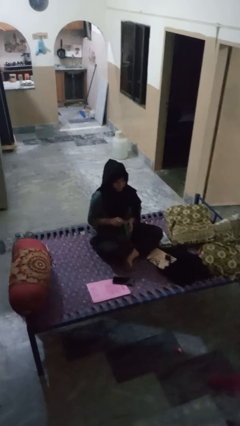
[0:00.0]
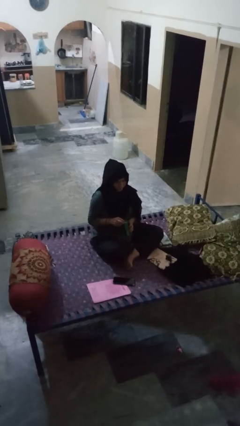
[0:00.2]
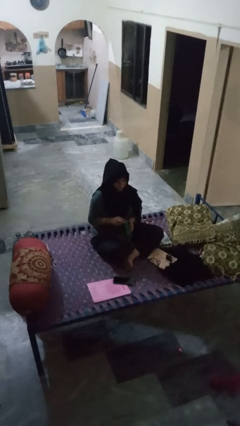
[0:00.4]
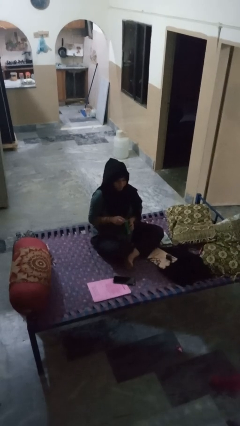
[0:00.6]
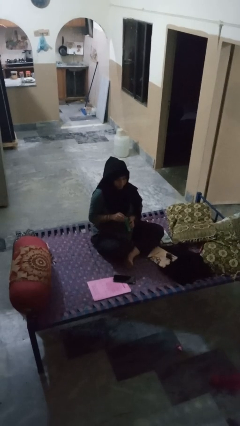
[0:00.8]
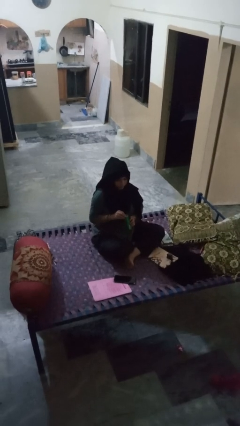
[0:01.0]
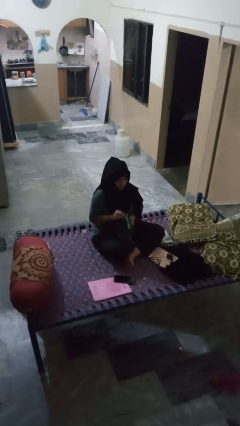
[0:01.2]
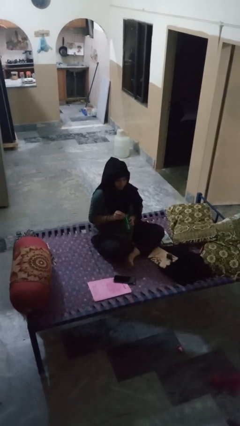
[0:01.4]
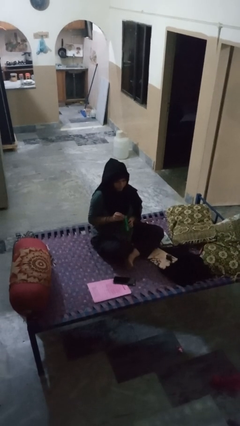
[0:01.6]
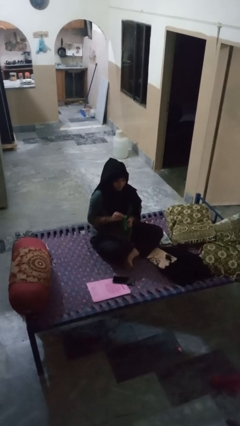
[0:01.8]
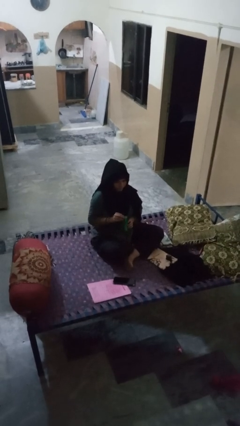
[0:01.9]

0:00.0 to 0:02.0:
person opens can with can opener

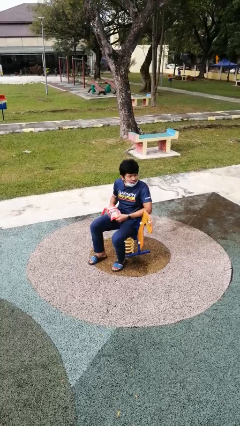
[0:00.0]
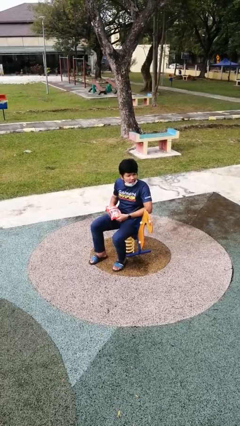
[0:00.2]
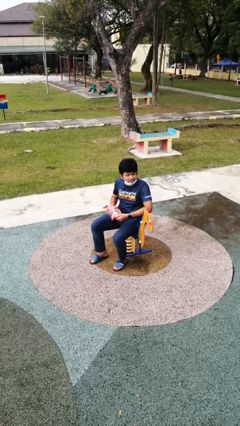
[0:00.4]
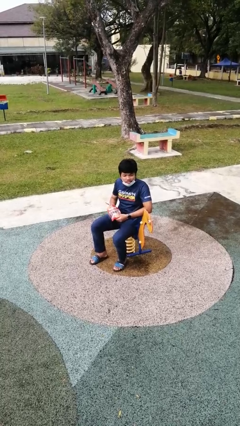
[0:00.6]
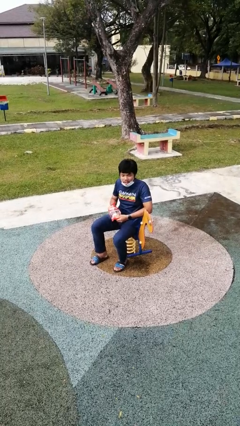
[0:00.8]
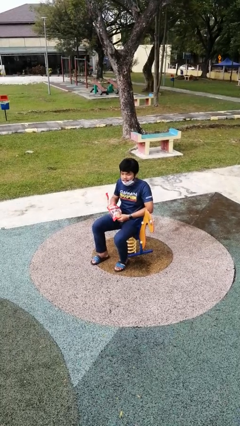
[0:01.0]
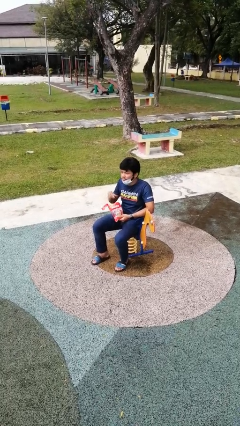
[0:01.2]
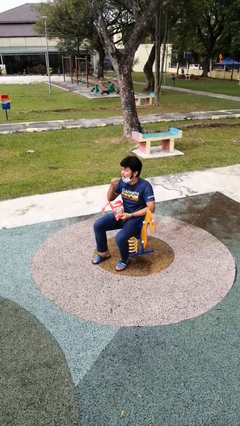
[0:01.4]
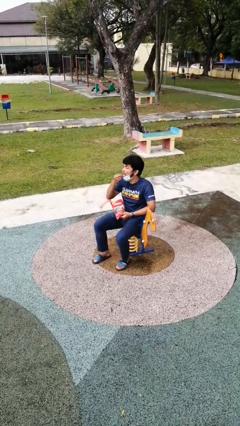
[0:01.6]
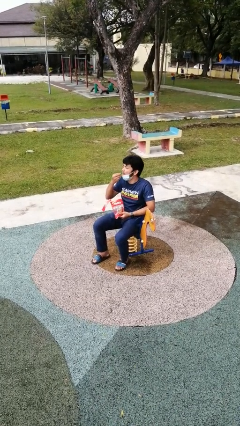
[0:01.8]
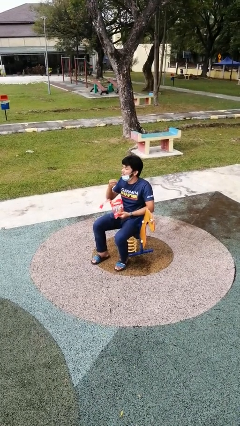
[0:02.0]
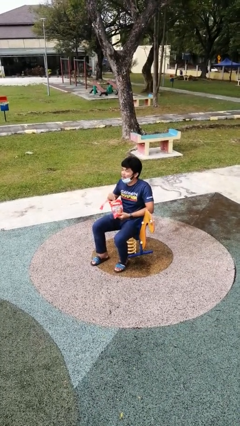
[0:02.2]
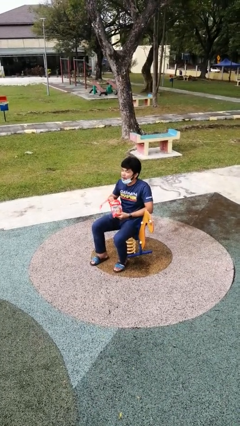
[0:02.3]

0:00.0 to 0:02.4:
person eats snack from bag

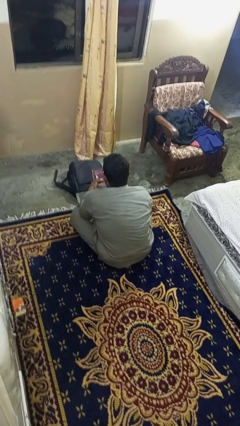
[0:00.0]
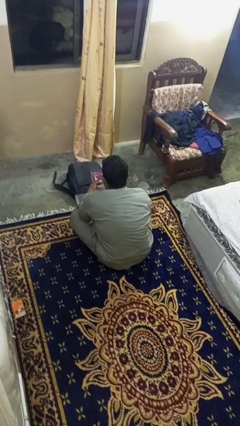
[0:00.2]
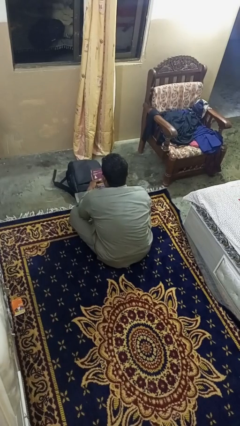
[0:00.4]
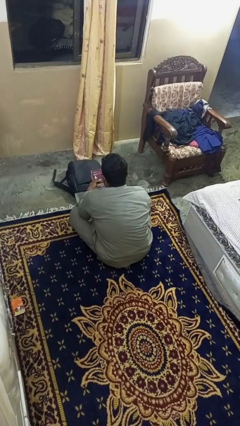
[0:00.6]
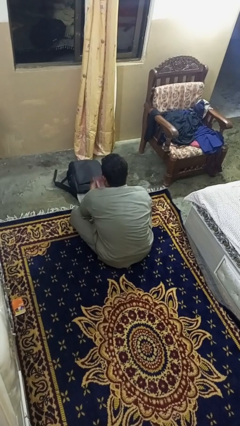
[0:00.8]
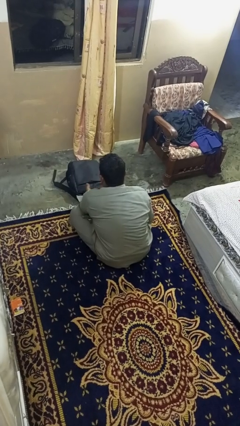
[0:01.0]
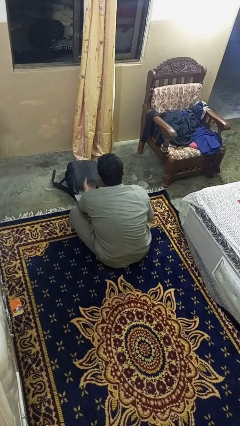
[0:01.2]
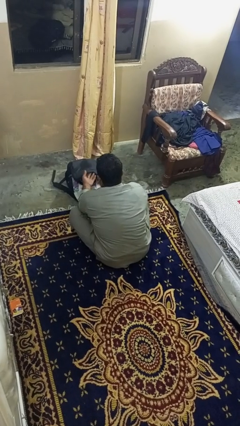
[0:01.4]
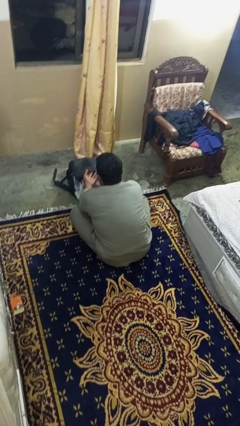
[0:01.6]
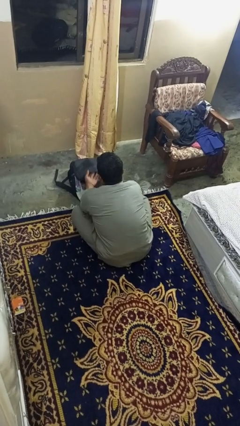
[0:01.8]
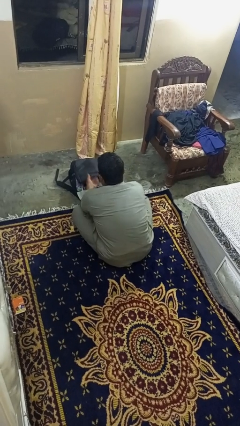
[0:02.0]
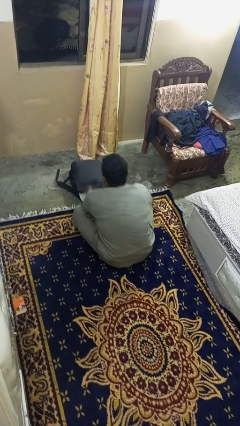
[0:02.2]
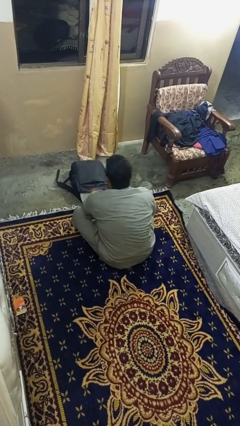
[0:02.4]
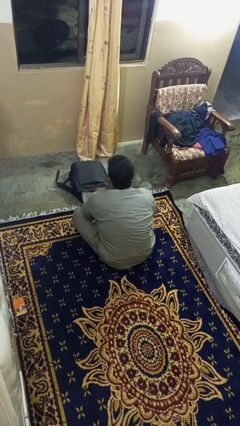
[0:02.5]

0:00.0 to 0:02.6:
person puts object into bag

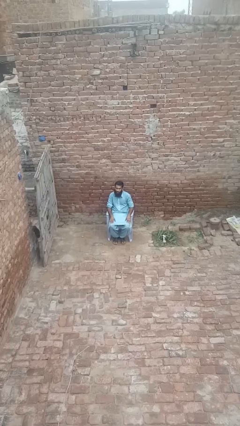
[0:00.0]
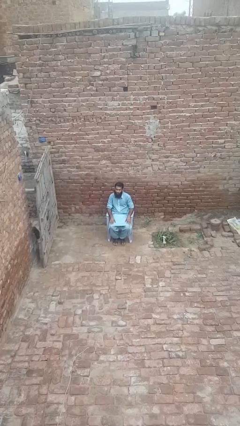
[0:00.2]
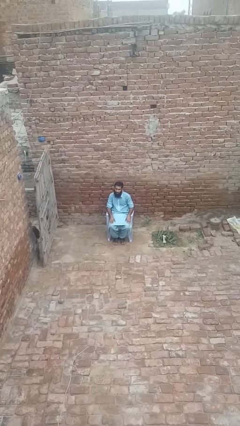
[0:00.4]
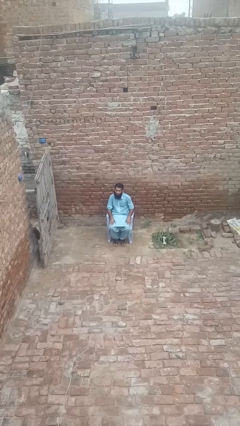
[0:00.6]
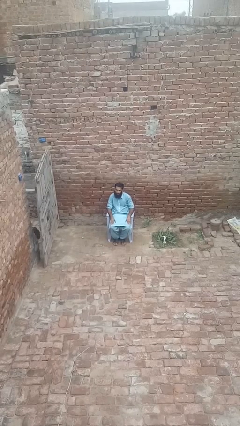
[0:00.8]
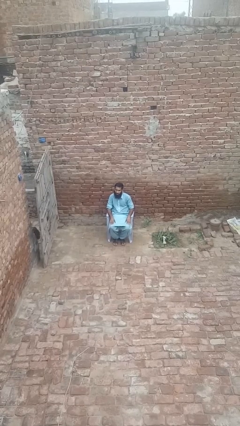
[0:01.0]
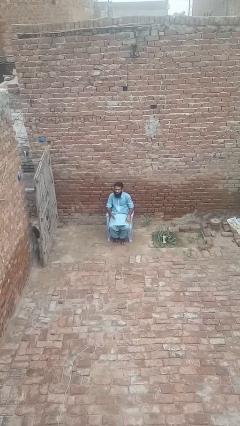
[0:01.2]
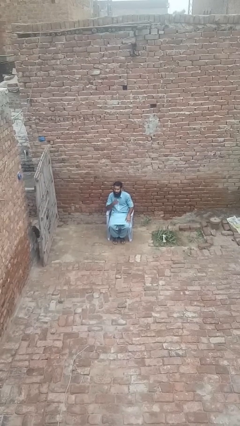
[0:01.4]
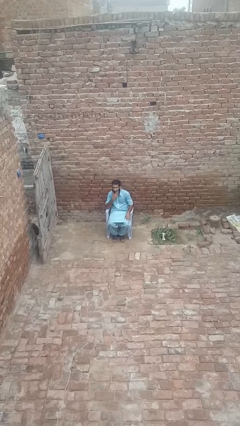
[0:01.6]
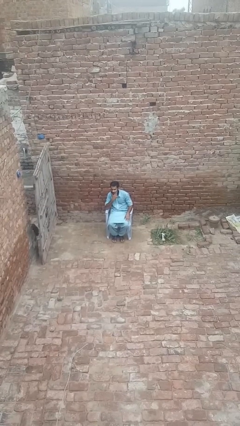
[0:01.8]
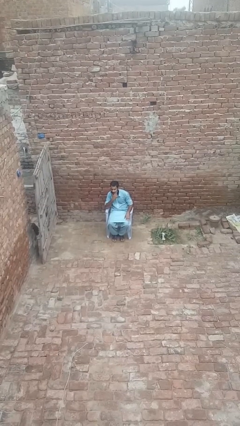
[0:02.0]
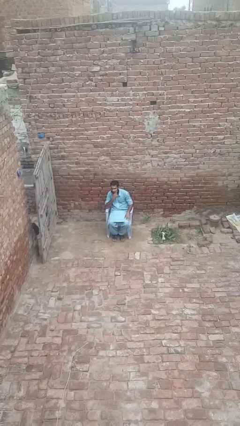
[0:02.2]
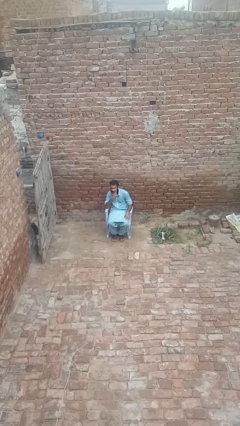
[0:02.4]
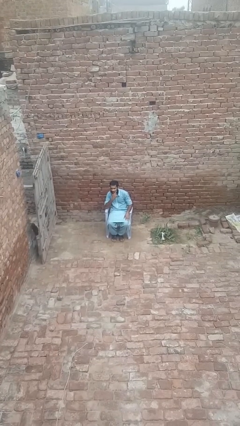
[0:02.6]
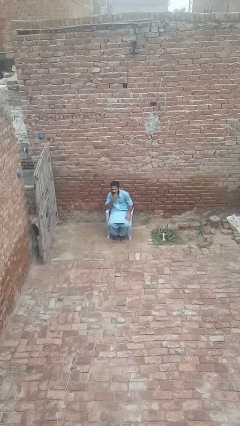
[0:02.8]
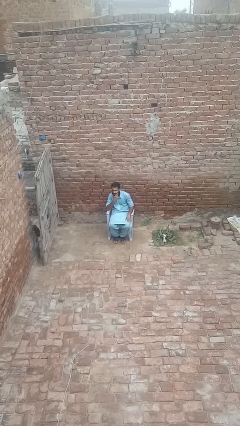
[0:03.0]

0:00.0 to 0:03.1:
person strokes chin

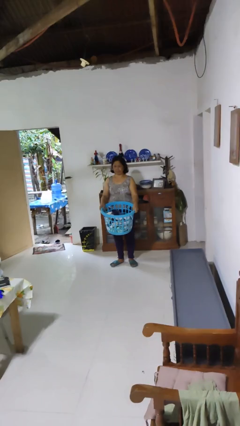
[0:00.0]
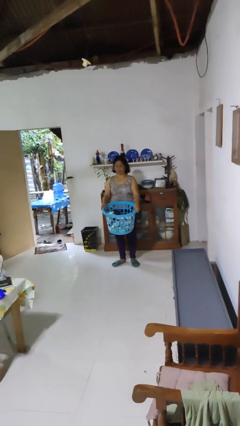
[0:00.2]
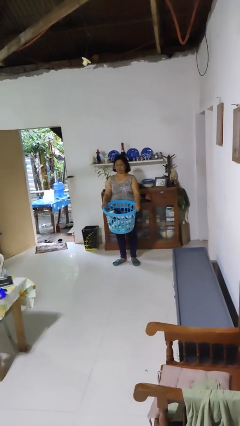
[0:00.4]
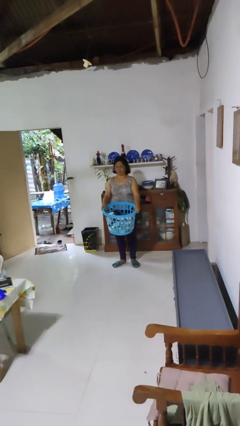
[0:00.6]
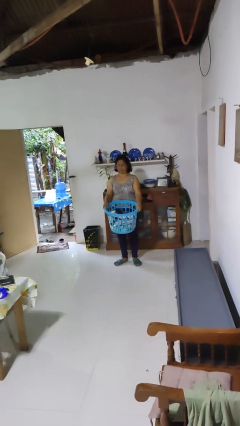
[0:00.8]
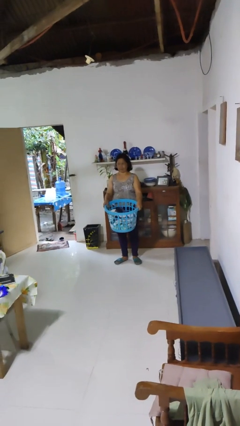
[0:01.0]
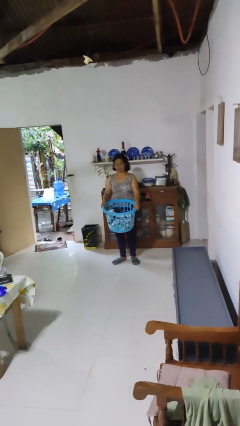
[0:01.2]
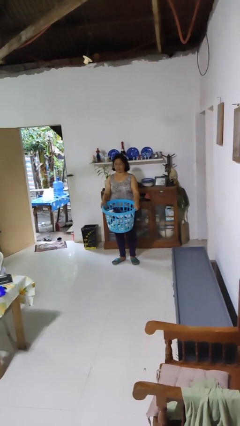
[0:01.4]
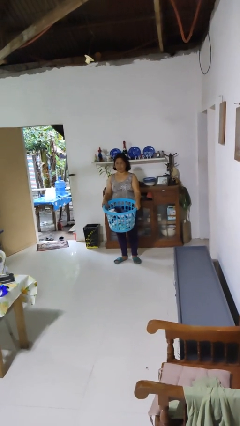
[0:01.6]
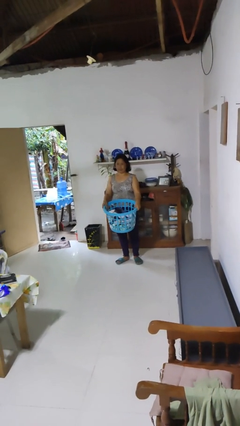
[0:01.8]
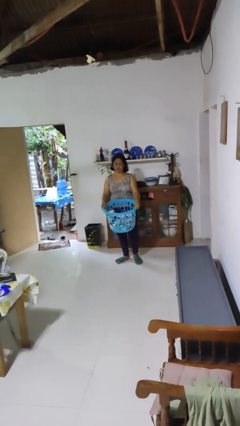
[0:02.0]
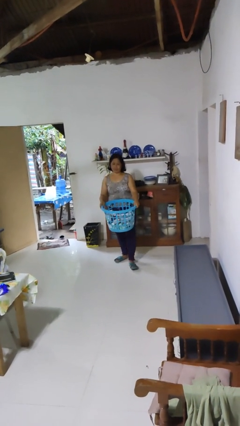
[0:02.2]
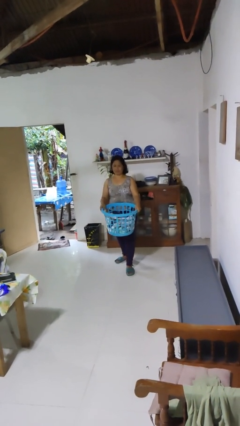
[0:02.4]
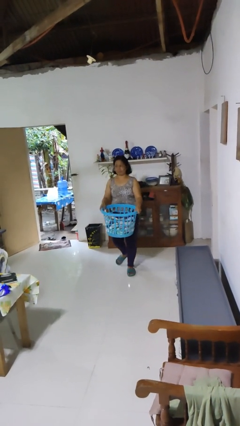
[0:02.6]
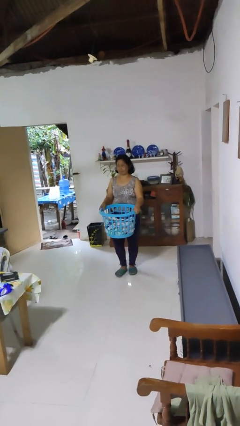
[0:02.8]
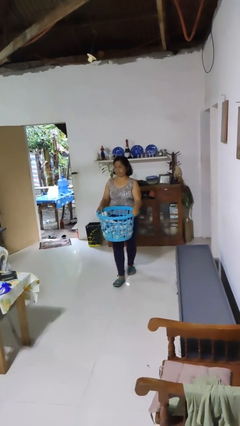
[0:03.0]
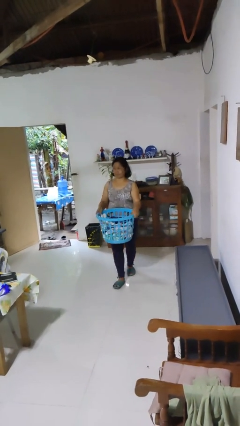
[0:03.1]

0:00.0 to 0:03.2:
person carries laundry basket

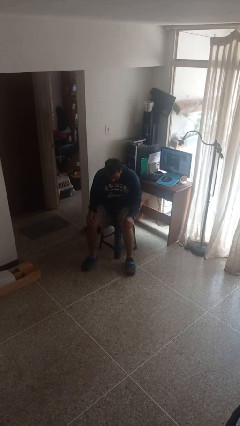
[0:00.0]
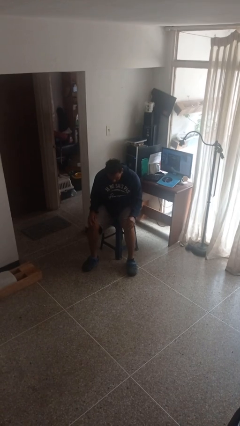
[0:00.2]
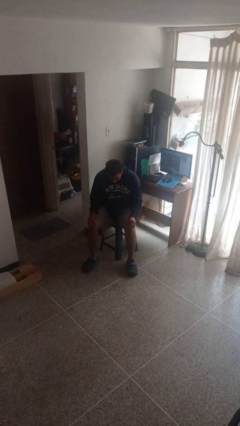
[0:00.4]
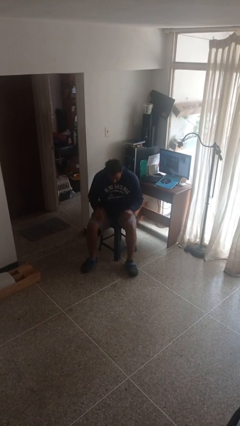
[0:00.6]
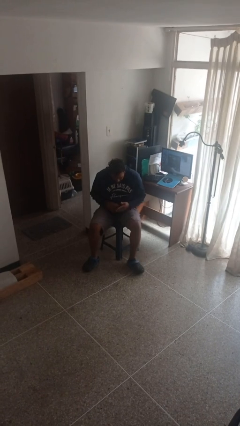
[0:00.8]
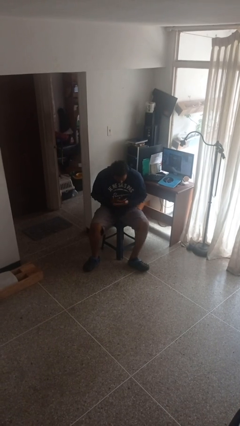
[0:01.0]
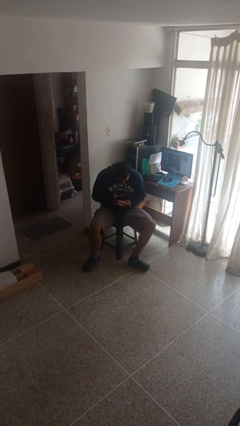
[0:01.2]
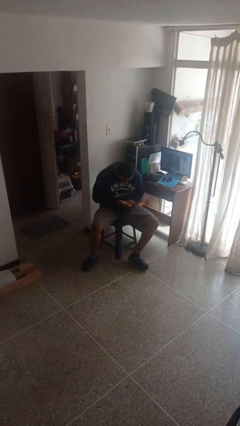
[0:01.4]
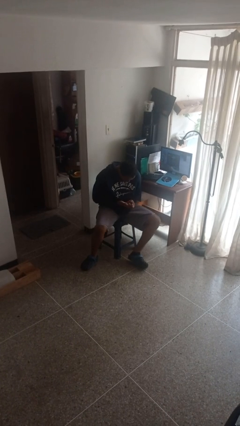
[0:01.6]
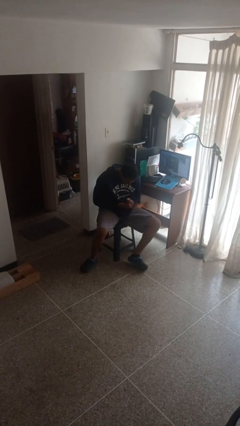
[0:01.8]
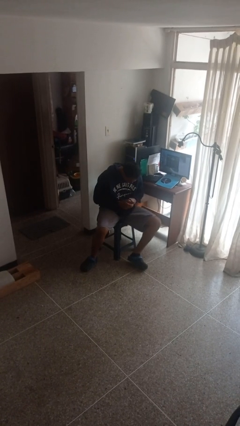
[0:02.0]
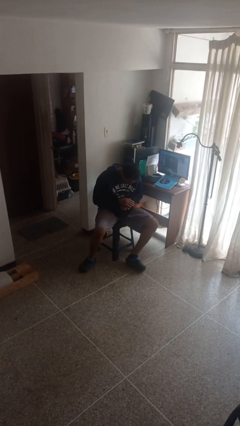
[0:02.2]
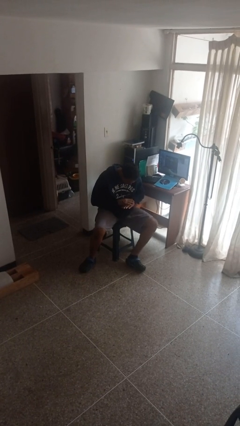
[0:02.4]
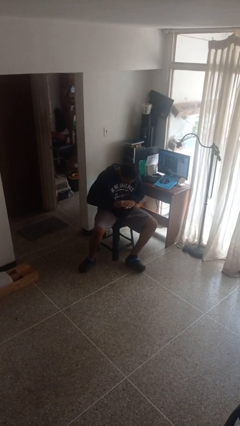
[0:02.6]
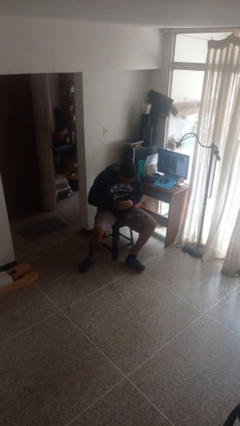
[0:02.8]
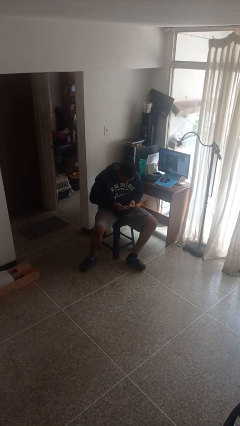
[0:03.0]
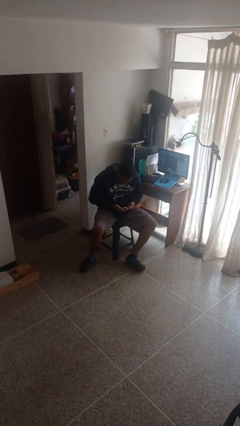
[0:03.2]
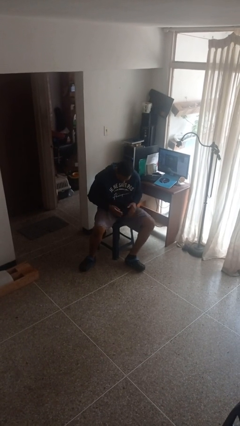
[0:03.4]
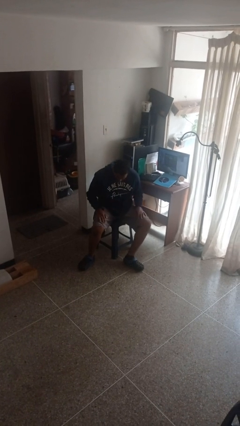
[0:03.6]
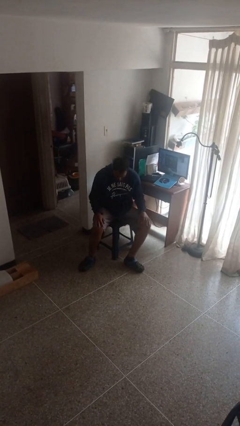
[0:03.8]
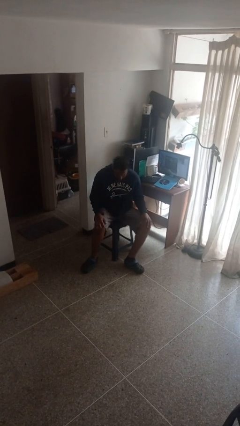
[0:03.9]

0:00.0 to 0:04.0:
person looks at hands in lap

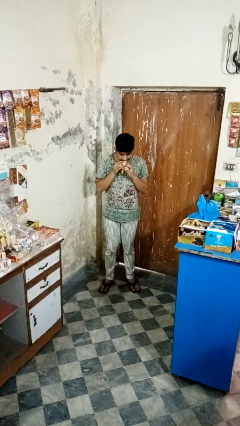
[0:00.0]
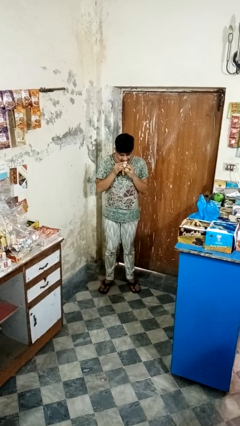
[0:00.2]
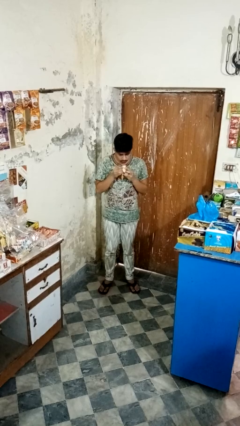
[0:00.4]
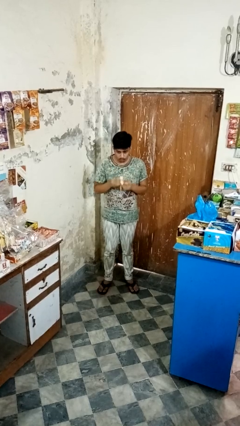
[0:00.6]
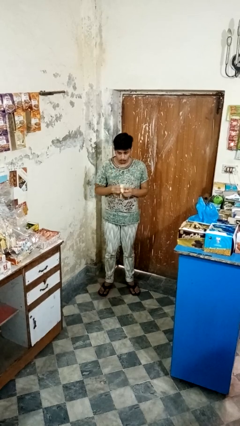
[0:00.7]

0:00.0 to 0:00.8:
person eats banana
